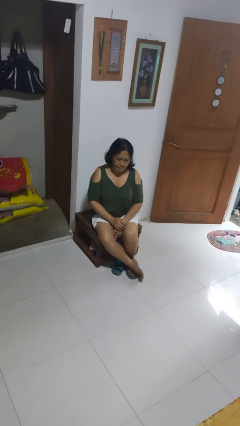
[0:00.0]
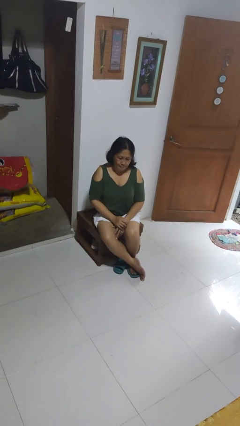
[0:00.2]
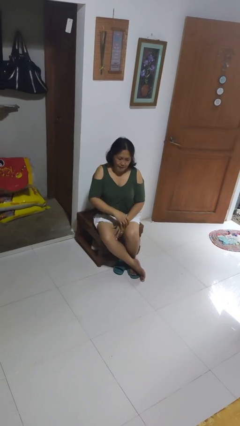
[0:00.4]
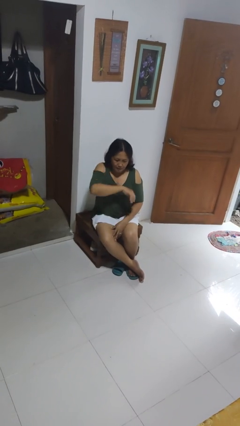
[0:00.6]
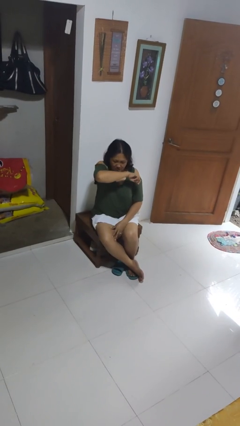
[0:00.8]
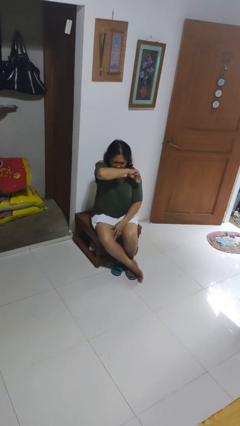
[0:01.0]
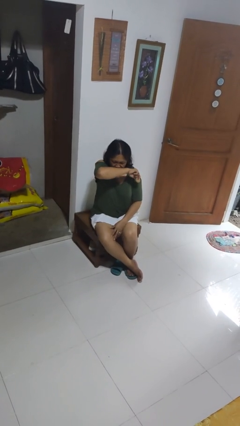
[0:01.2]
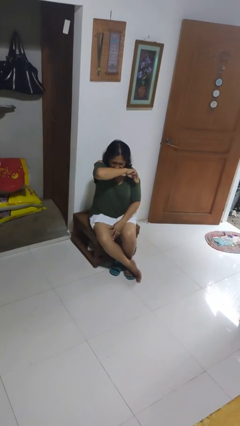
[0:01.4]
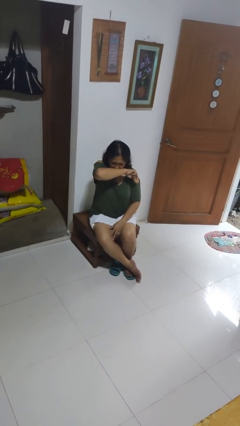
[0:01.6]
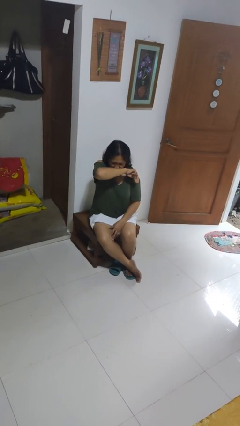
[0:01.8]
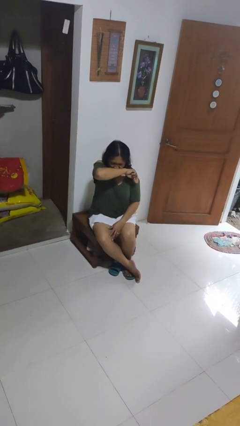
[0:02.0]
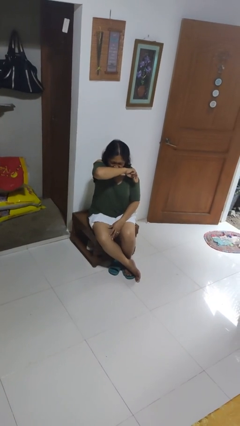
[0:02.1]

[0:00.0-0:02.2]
person sneezes into arm

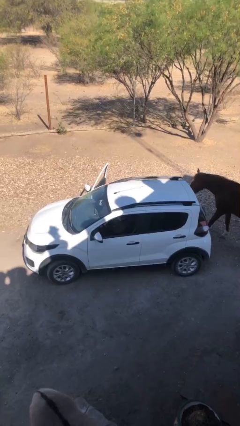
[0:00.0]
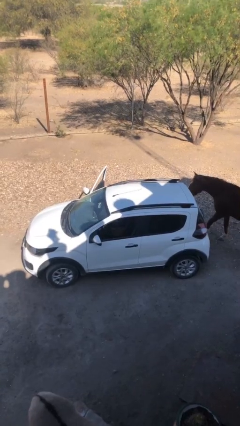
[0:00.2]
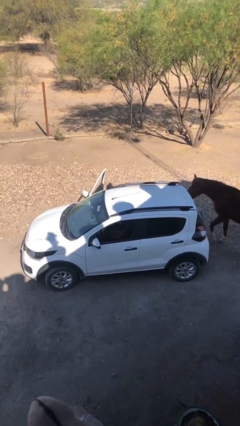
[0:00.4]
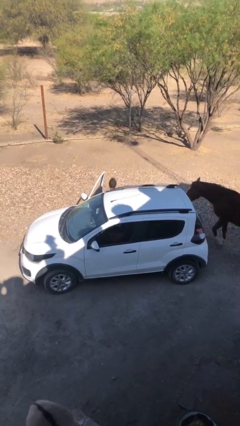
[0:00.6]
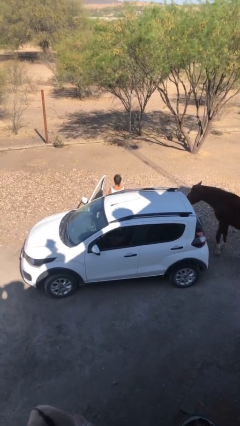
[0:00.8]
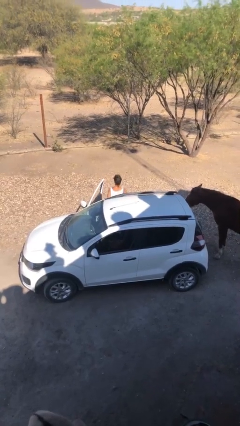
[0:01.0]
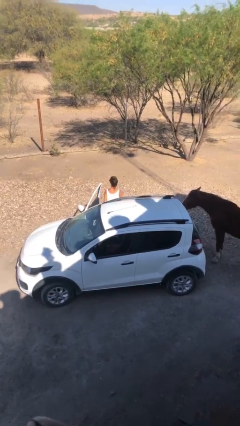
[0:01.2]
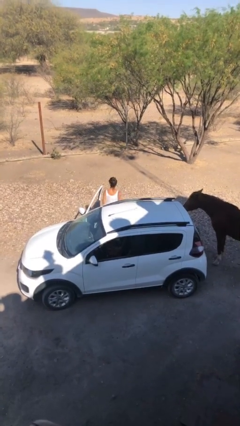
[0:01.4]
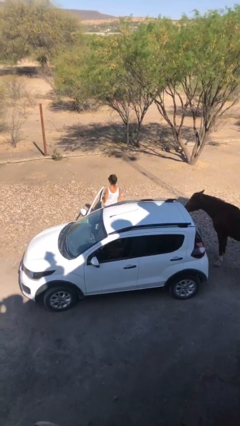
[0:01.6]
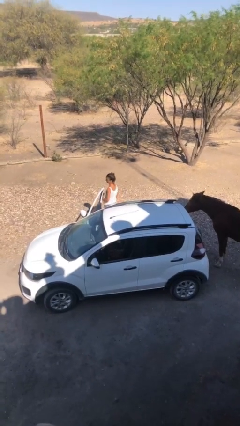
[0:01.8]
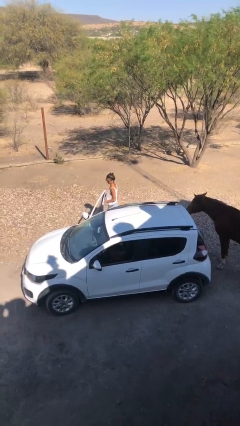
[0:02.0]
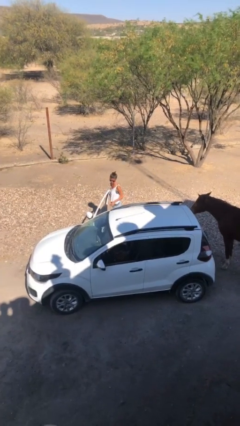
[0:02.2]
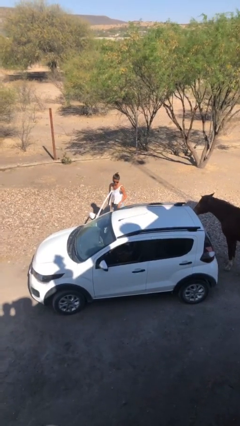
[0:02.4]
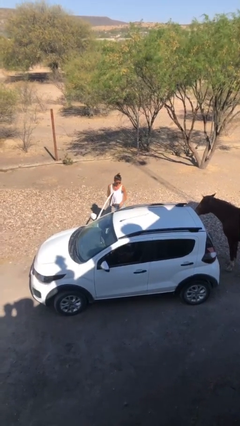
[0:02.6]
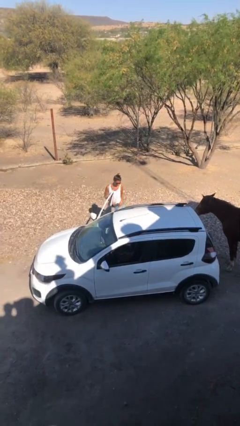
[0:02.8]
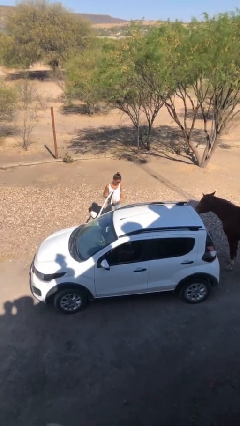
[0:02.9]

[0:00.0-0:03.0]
person exits car

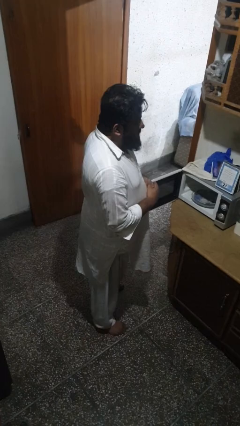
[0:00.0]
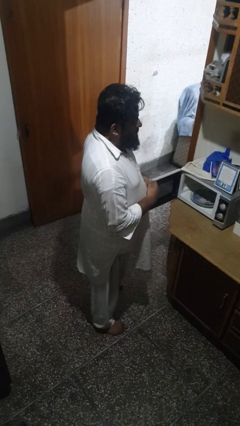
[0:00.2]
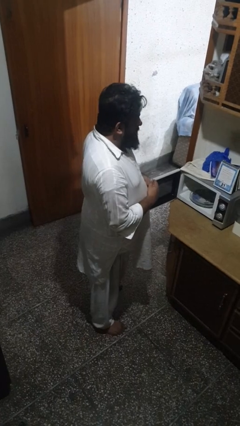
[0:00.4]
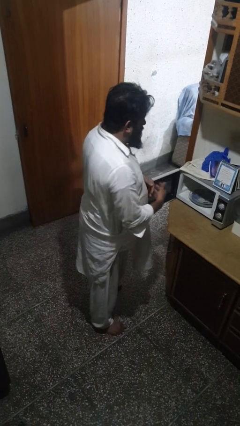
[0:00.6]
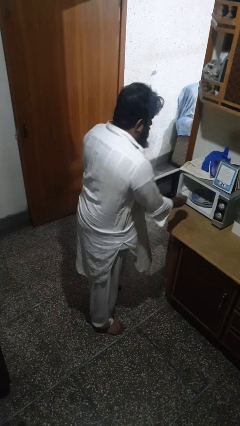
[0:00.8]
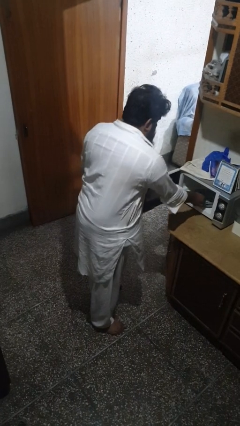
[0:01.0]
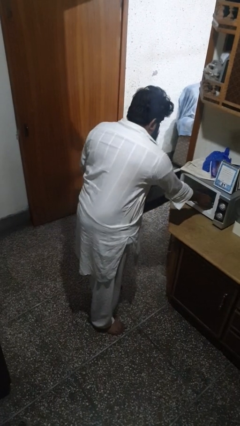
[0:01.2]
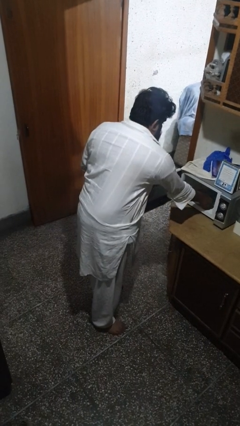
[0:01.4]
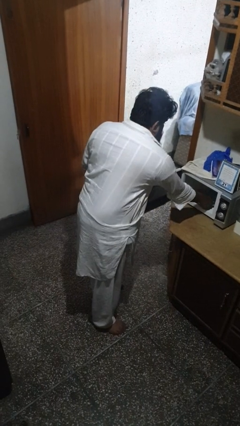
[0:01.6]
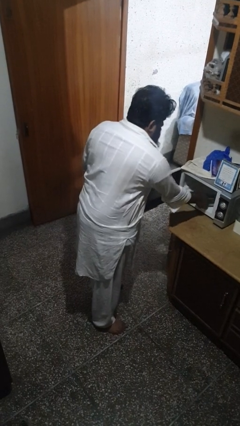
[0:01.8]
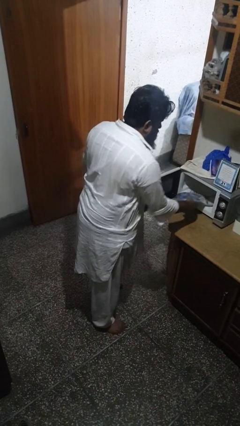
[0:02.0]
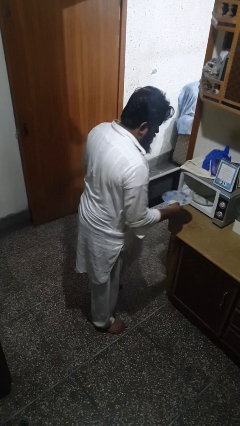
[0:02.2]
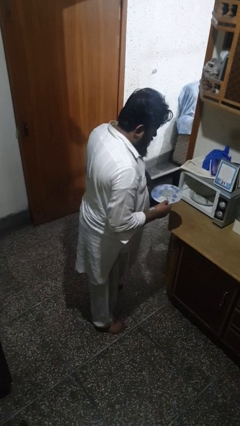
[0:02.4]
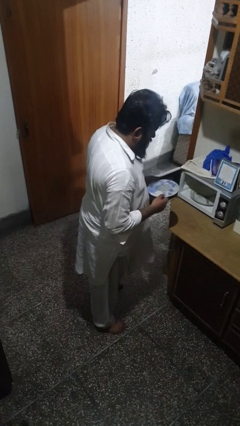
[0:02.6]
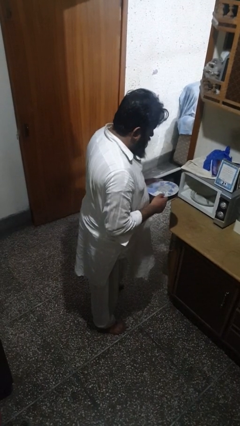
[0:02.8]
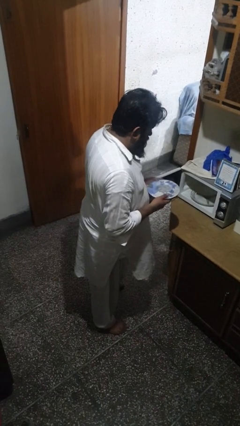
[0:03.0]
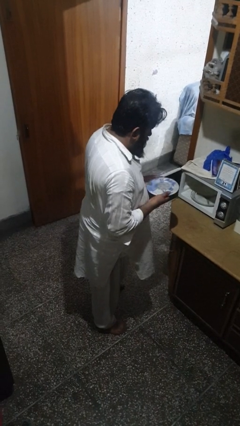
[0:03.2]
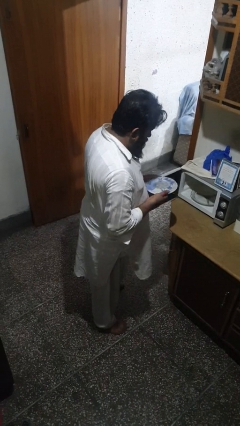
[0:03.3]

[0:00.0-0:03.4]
person takes object from oven

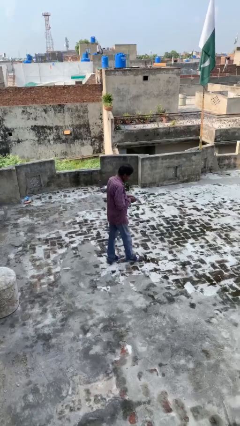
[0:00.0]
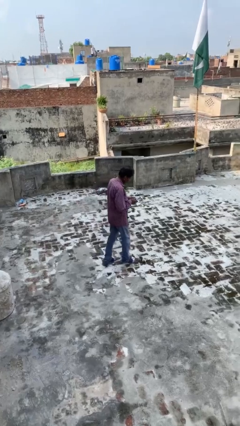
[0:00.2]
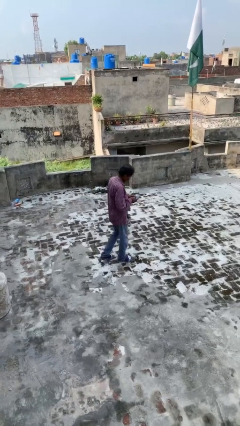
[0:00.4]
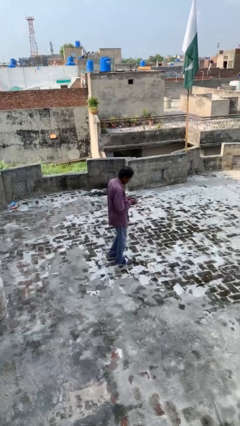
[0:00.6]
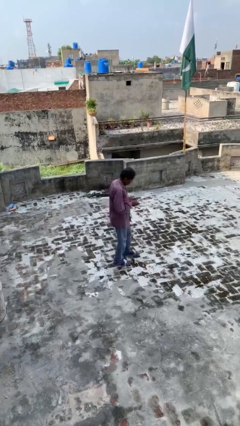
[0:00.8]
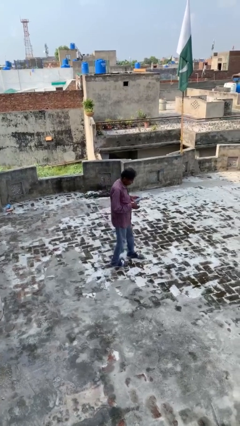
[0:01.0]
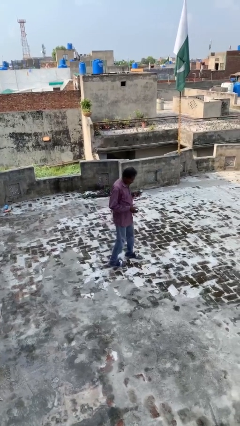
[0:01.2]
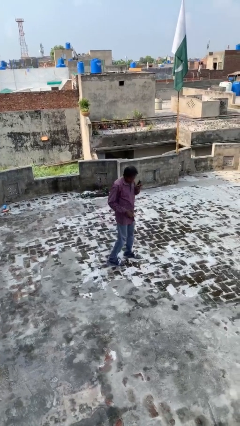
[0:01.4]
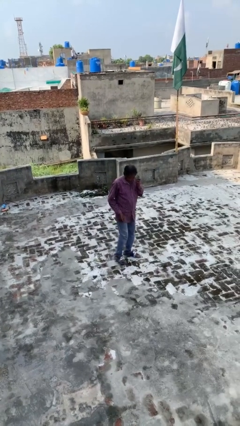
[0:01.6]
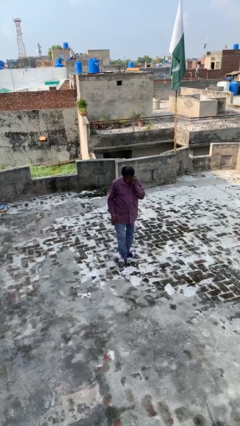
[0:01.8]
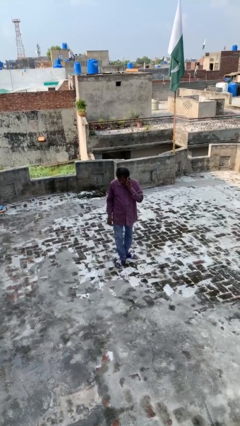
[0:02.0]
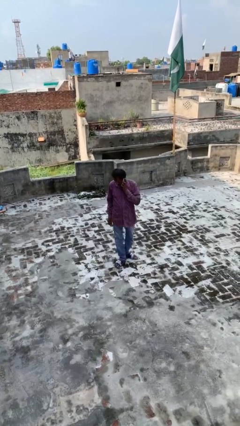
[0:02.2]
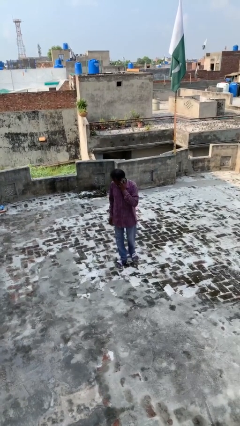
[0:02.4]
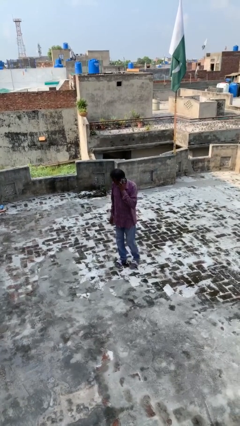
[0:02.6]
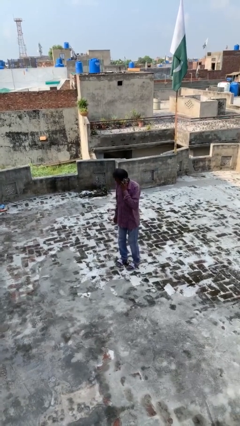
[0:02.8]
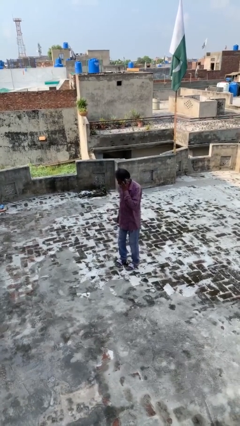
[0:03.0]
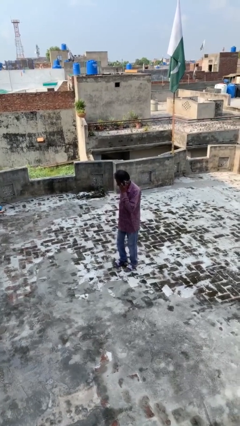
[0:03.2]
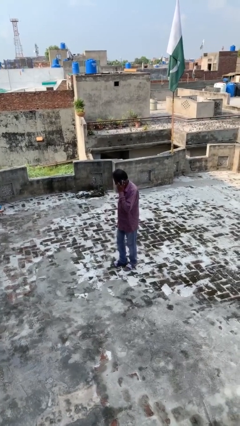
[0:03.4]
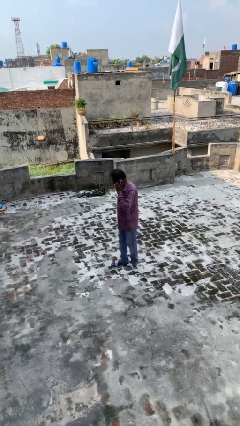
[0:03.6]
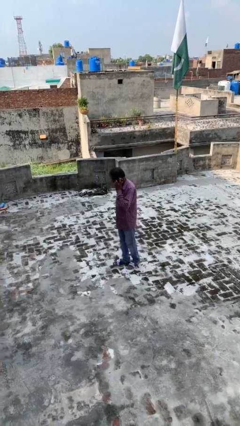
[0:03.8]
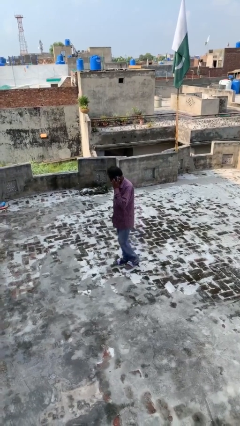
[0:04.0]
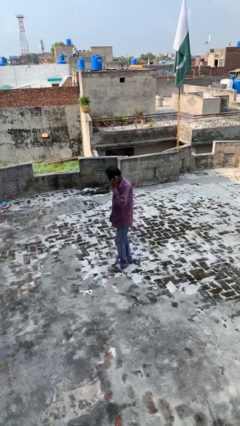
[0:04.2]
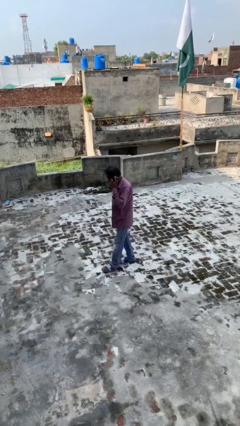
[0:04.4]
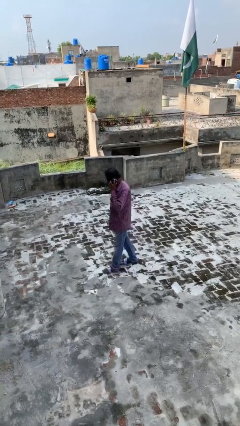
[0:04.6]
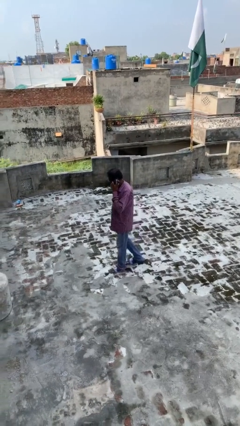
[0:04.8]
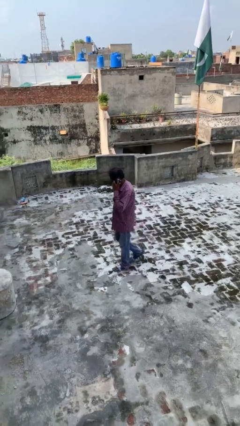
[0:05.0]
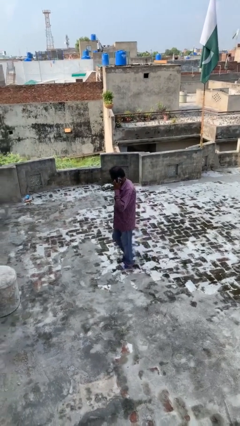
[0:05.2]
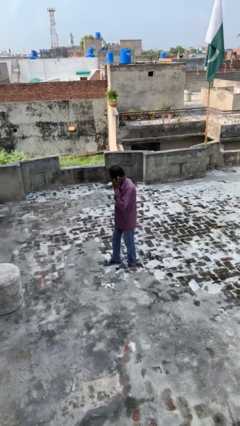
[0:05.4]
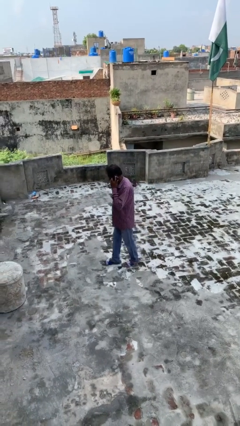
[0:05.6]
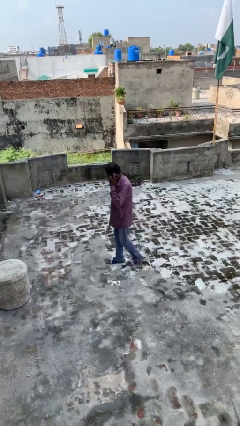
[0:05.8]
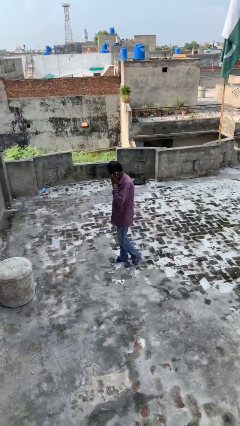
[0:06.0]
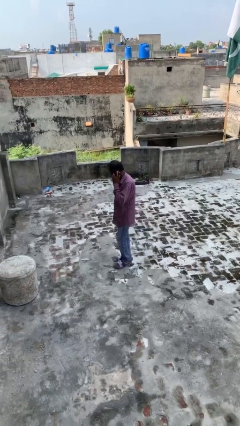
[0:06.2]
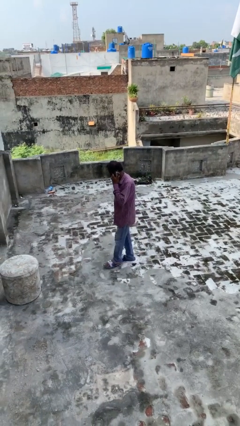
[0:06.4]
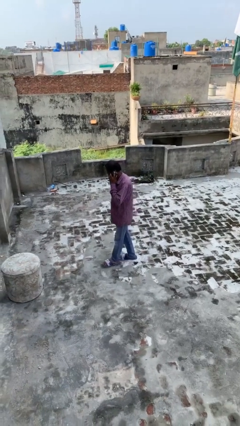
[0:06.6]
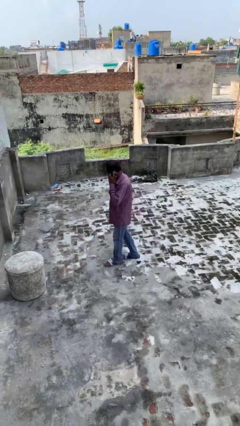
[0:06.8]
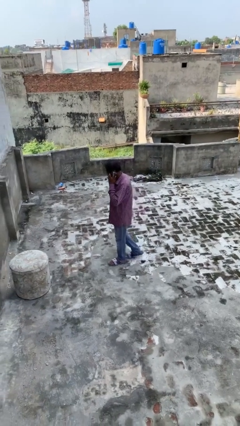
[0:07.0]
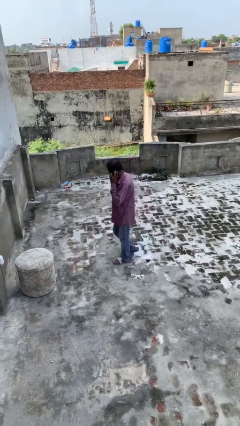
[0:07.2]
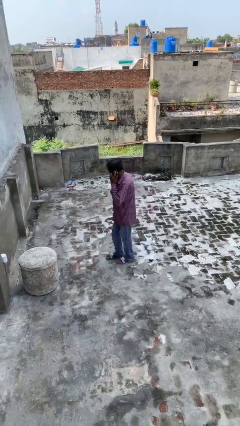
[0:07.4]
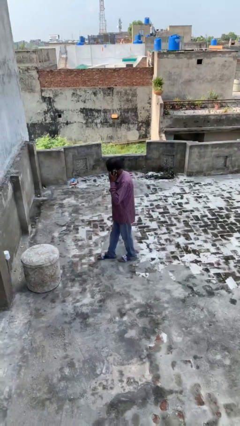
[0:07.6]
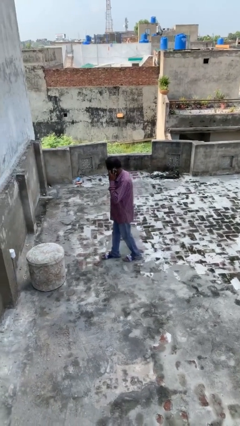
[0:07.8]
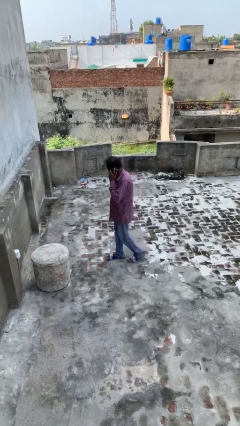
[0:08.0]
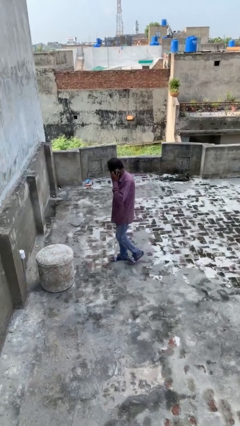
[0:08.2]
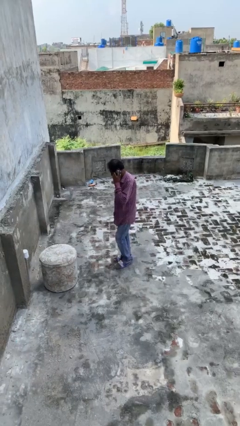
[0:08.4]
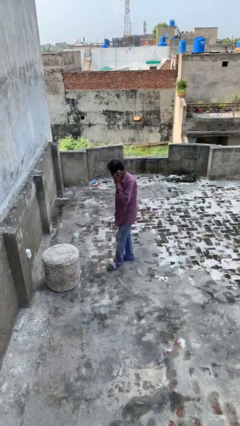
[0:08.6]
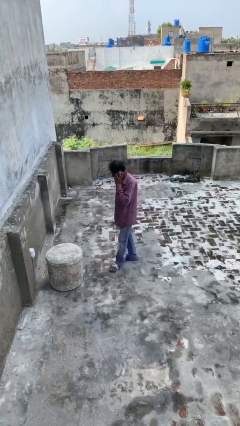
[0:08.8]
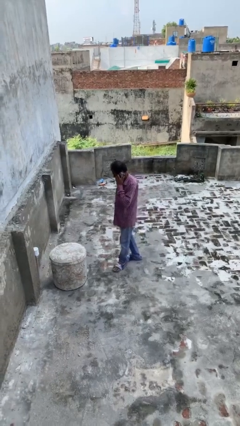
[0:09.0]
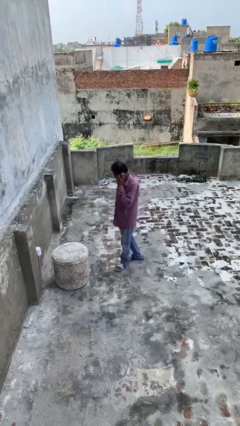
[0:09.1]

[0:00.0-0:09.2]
person talks on phone

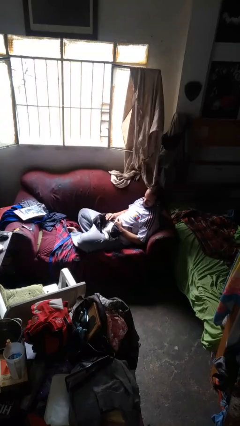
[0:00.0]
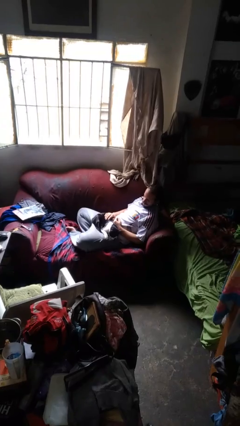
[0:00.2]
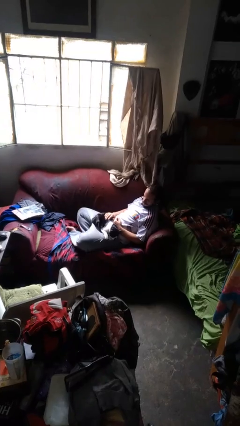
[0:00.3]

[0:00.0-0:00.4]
person pets cat
